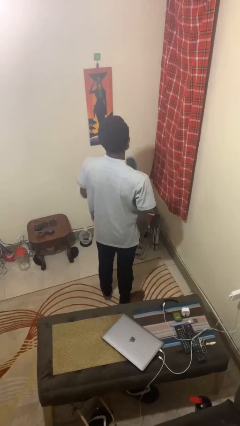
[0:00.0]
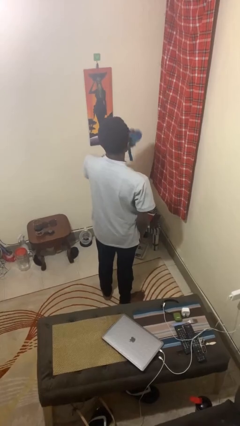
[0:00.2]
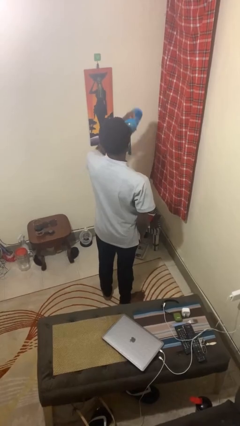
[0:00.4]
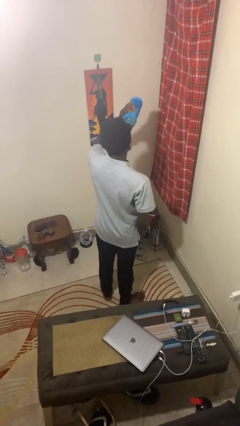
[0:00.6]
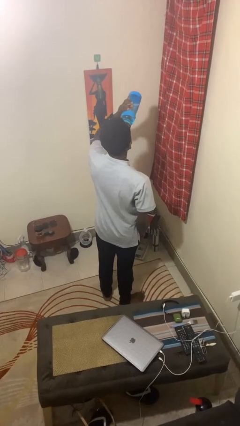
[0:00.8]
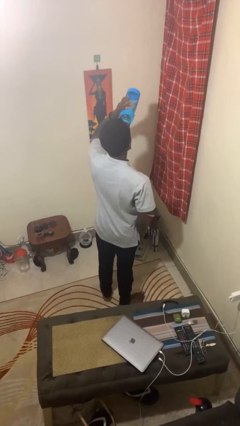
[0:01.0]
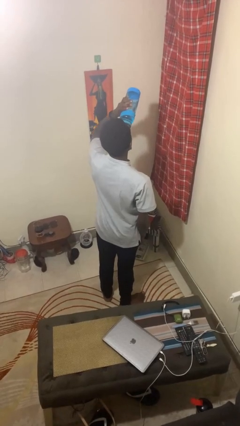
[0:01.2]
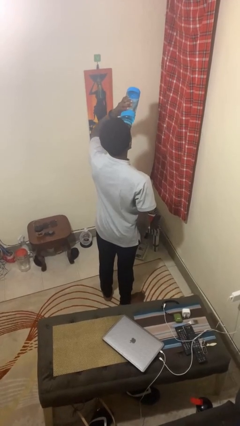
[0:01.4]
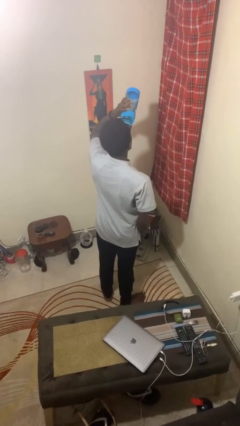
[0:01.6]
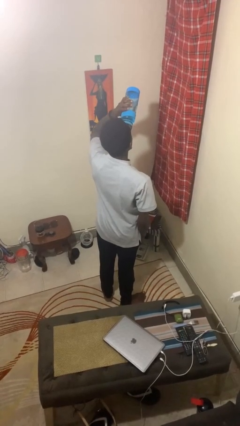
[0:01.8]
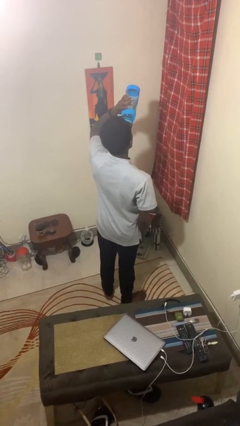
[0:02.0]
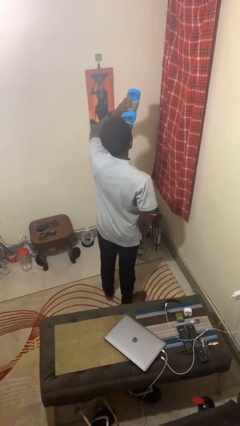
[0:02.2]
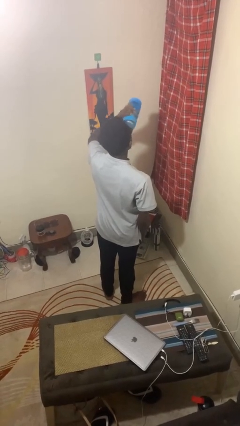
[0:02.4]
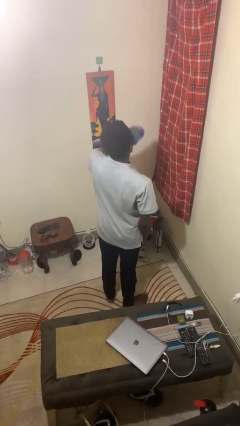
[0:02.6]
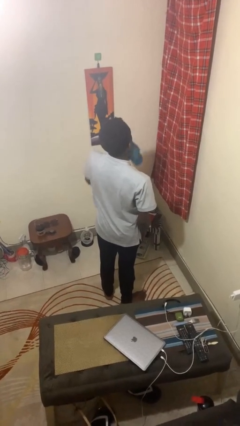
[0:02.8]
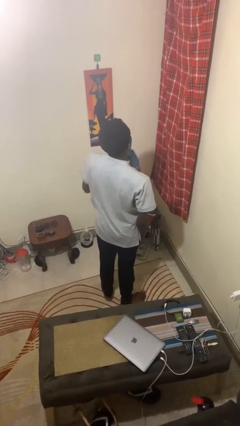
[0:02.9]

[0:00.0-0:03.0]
person drinks from bottle

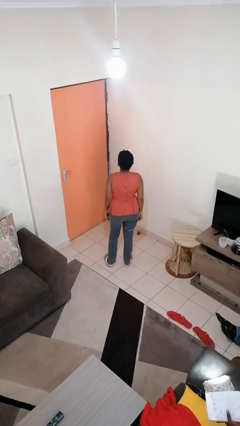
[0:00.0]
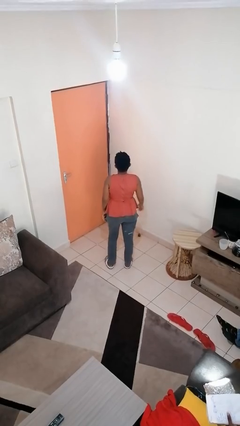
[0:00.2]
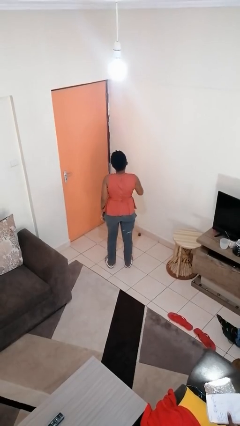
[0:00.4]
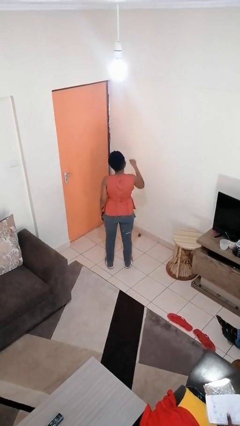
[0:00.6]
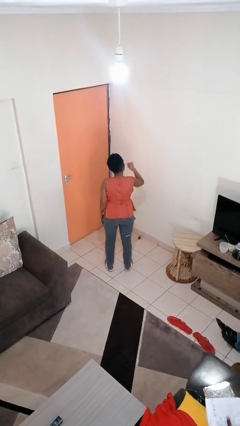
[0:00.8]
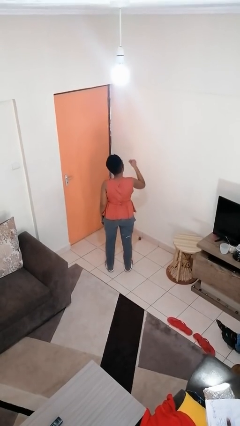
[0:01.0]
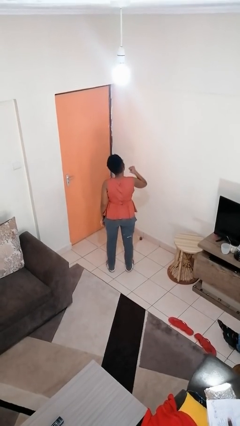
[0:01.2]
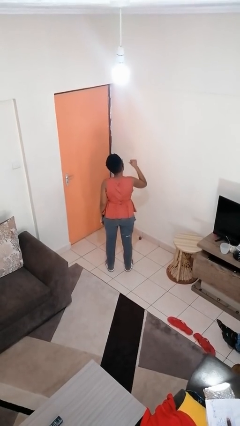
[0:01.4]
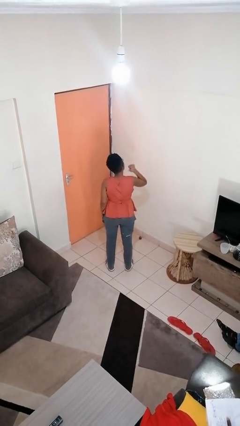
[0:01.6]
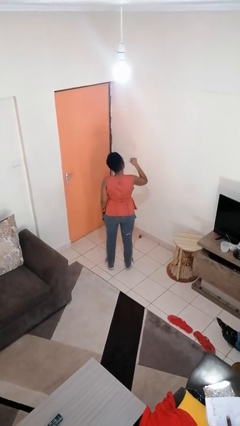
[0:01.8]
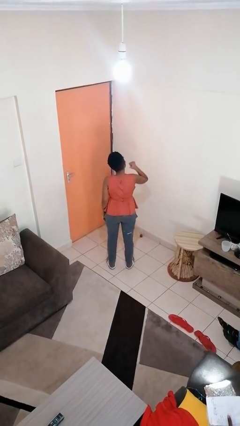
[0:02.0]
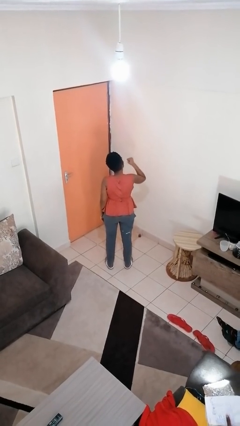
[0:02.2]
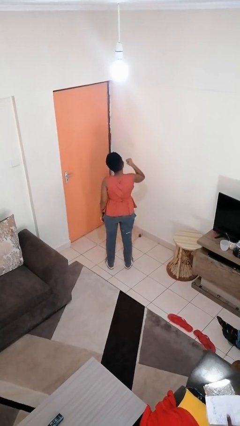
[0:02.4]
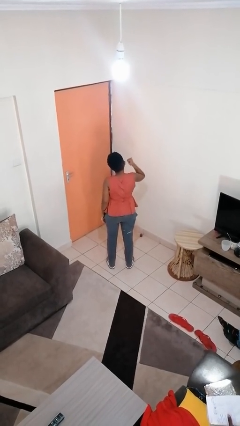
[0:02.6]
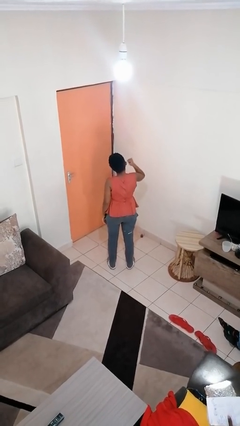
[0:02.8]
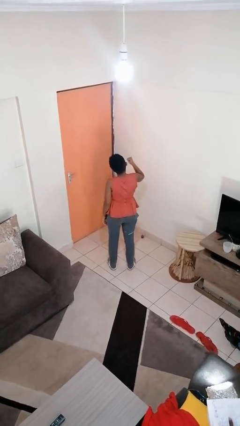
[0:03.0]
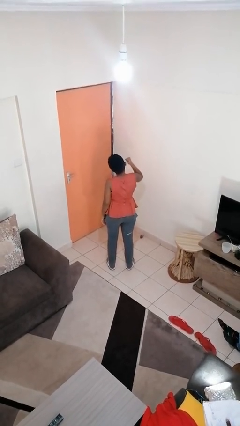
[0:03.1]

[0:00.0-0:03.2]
person gestures behind me

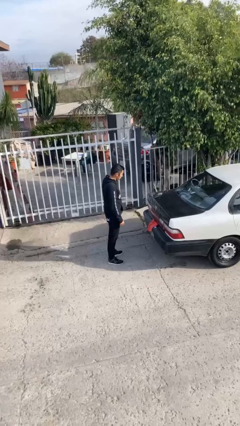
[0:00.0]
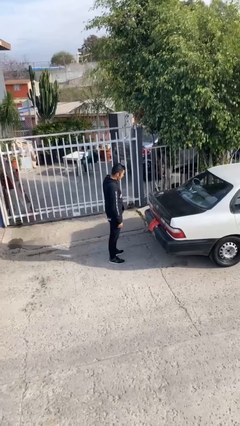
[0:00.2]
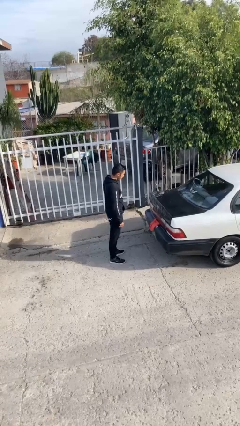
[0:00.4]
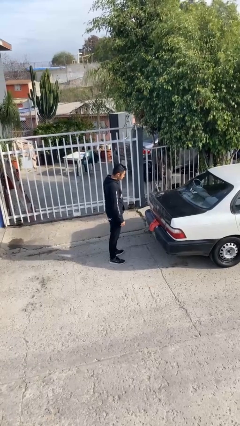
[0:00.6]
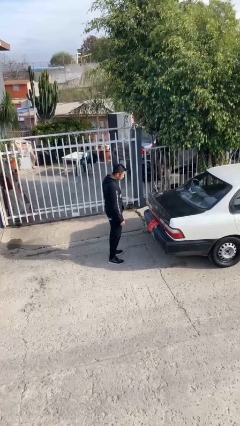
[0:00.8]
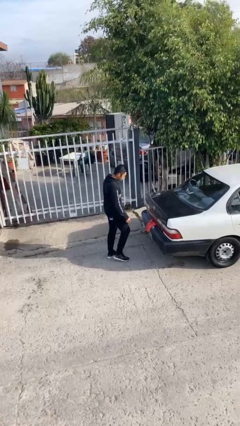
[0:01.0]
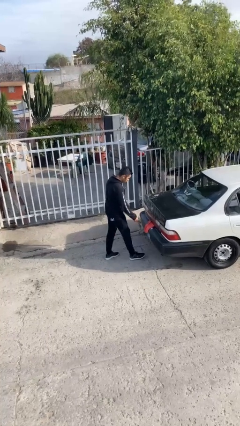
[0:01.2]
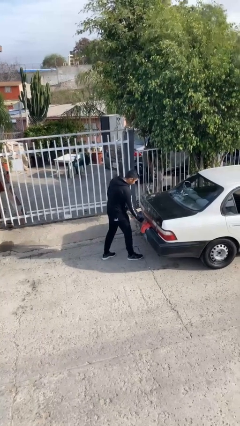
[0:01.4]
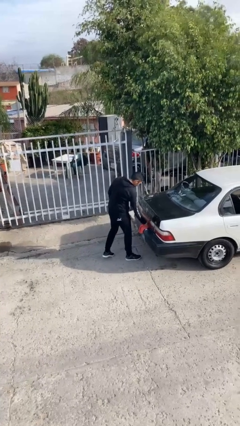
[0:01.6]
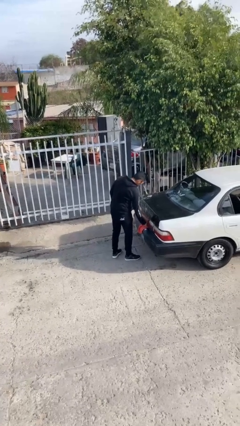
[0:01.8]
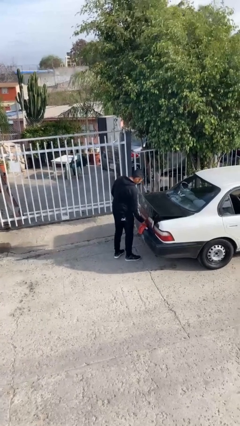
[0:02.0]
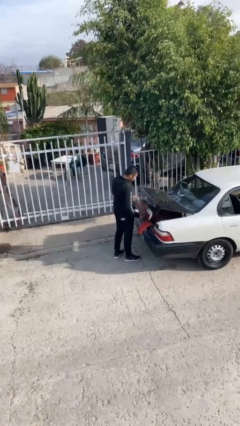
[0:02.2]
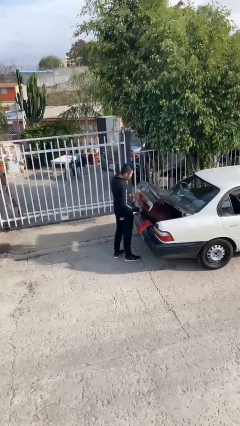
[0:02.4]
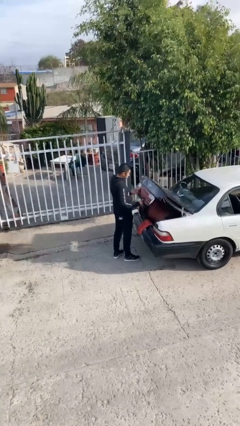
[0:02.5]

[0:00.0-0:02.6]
person closes car trunk

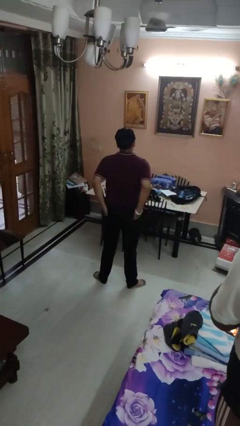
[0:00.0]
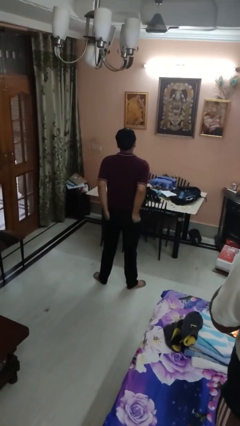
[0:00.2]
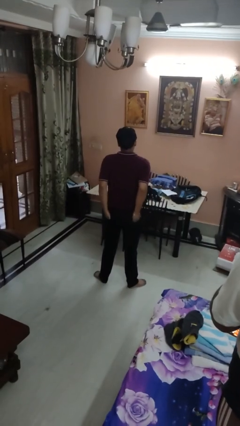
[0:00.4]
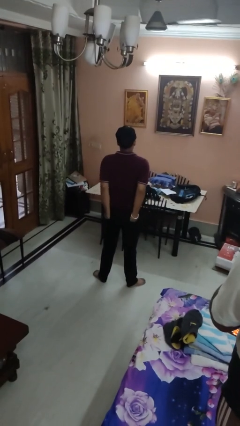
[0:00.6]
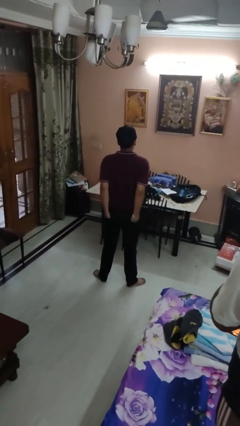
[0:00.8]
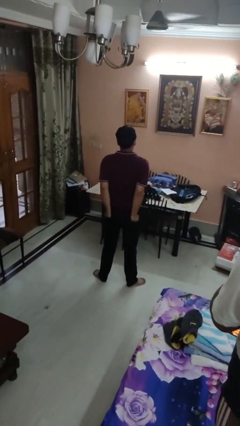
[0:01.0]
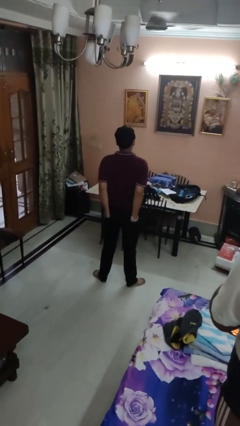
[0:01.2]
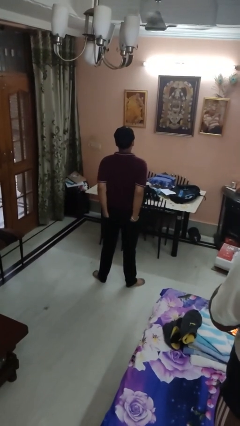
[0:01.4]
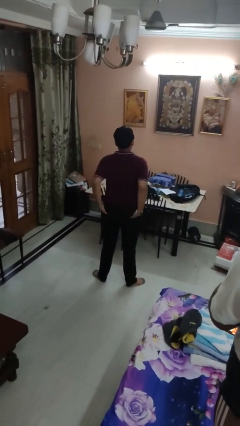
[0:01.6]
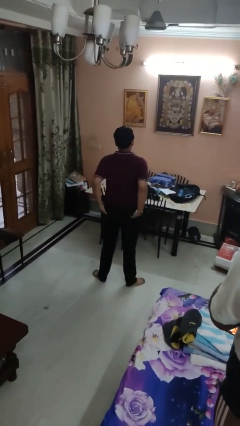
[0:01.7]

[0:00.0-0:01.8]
person puts hands in back pockets

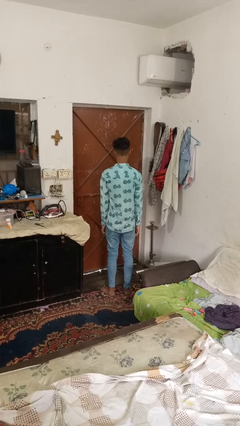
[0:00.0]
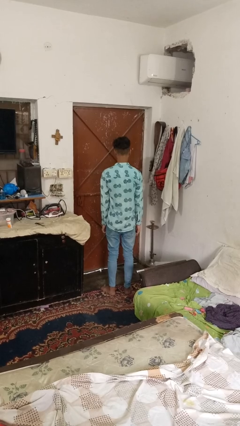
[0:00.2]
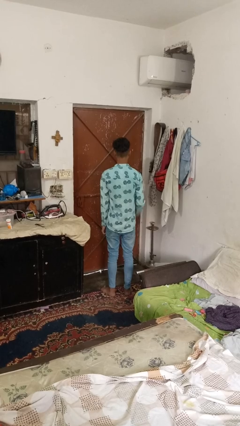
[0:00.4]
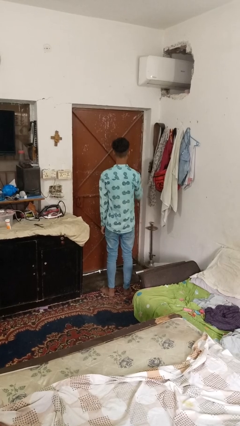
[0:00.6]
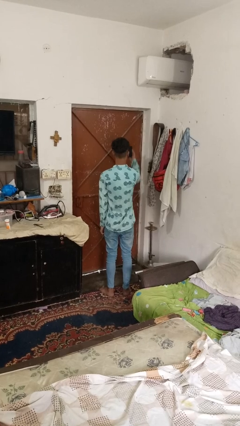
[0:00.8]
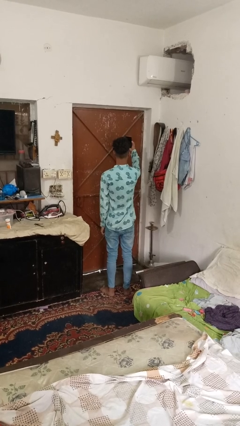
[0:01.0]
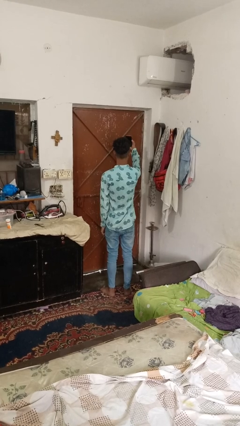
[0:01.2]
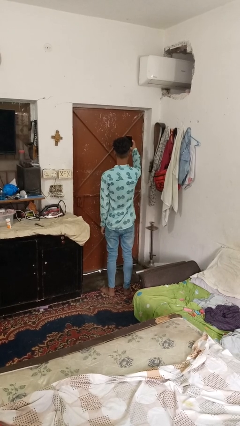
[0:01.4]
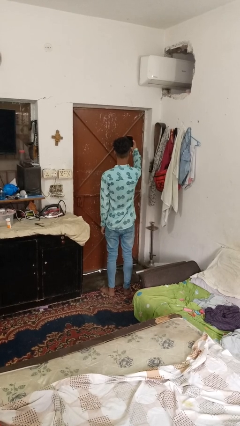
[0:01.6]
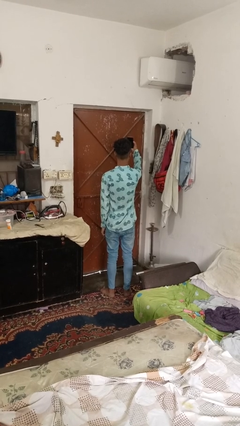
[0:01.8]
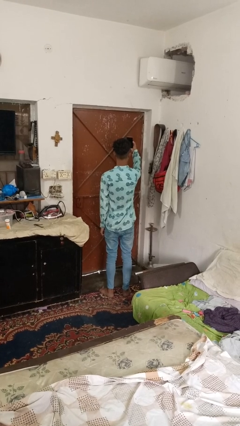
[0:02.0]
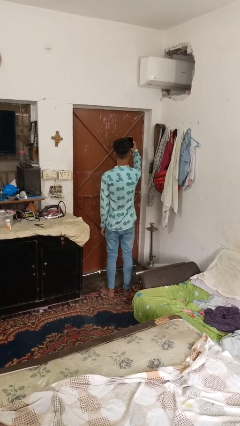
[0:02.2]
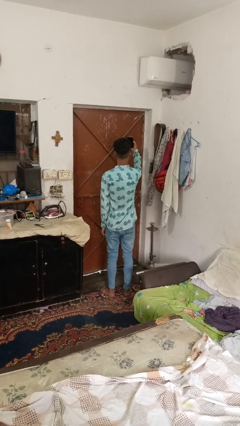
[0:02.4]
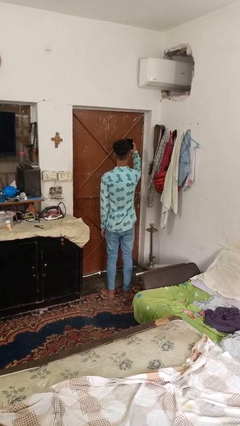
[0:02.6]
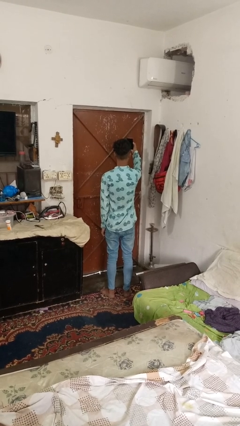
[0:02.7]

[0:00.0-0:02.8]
person takes selfie

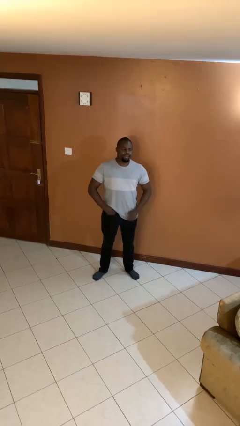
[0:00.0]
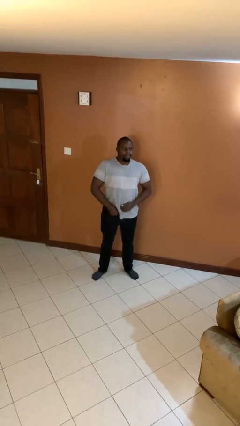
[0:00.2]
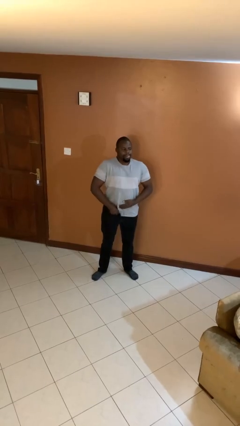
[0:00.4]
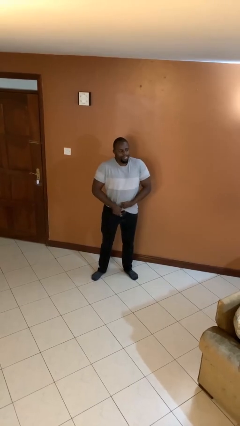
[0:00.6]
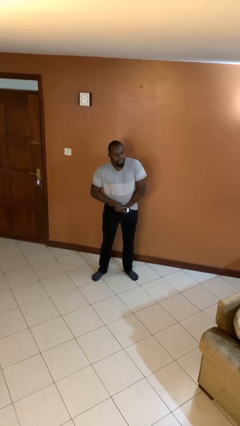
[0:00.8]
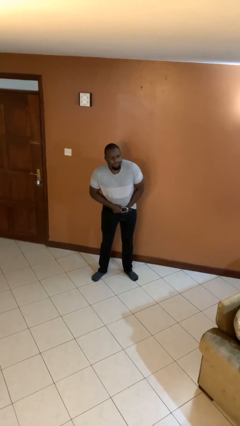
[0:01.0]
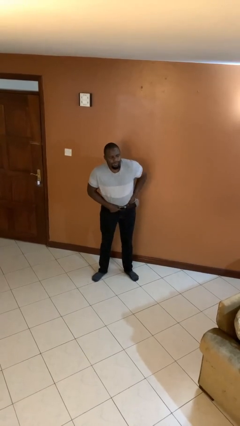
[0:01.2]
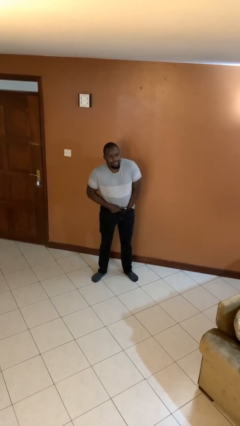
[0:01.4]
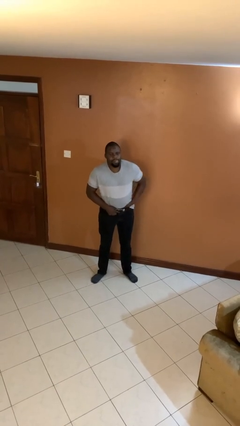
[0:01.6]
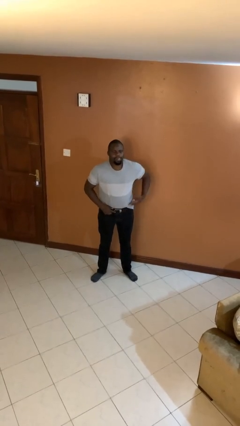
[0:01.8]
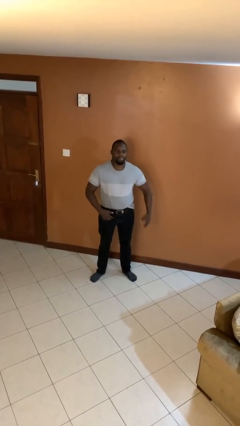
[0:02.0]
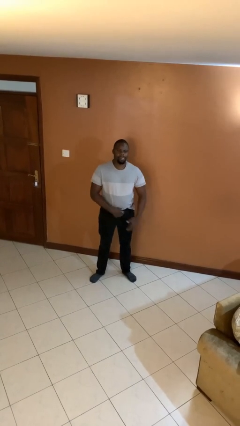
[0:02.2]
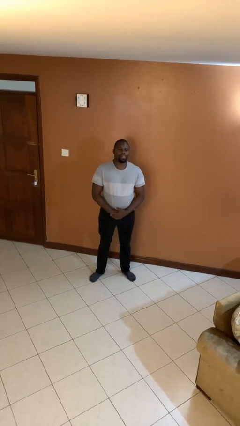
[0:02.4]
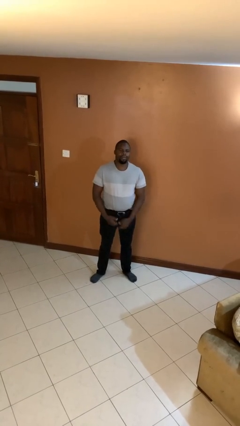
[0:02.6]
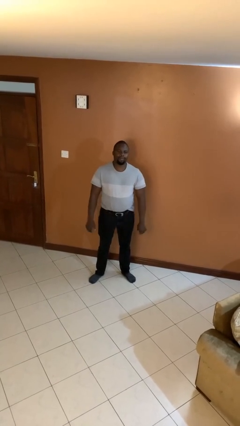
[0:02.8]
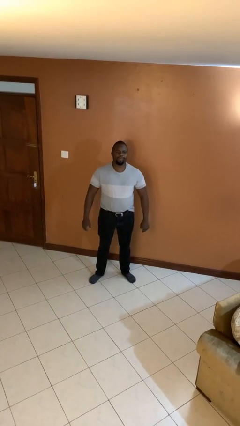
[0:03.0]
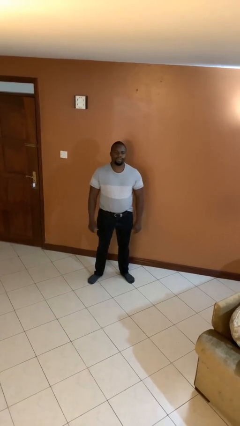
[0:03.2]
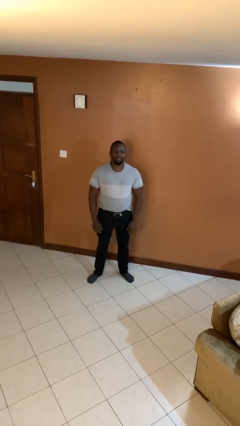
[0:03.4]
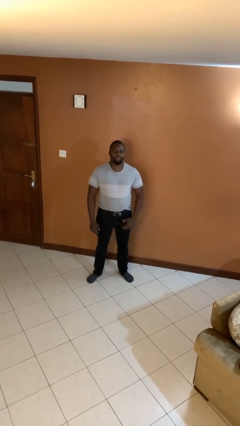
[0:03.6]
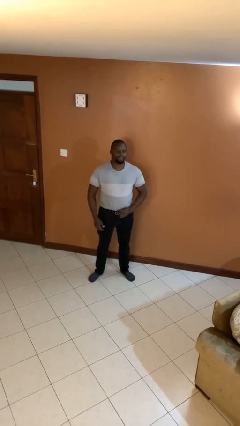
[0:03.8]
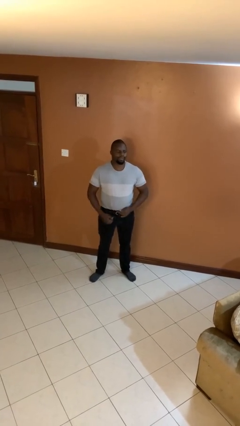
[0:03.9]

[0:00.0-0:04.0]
person tucks in shirt
